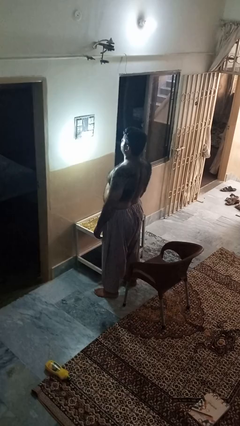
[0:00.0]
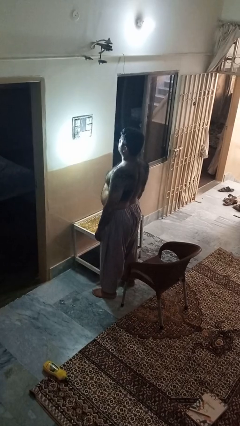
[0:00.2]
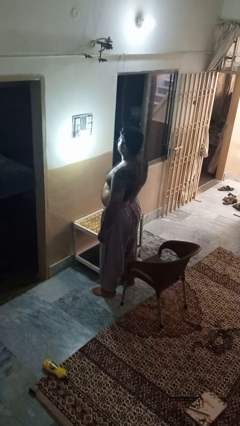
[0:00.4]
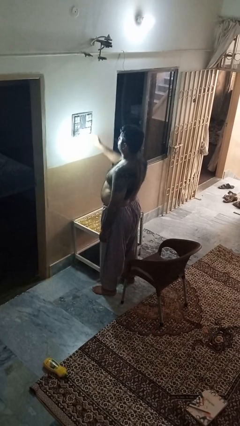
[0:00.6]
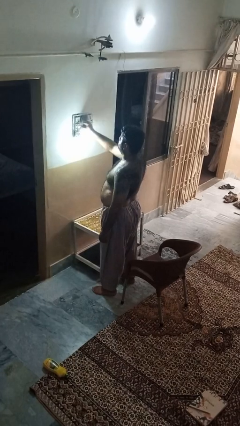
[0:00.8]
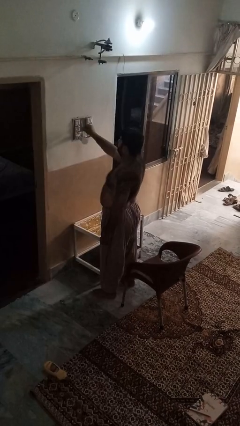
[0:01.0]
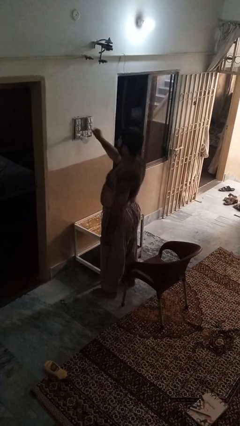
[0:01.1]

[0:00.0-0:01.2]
person turns off lamp

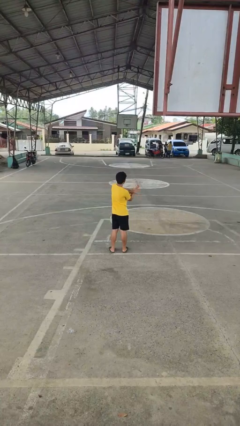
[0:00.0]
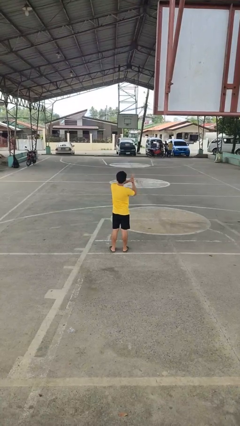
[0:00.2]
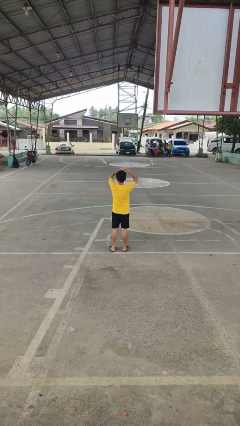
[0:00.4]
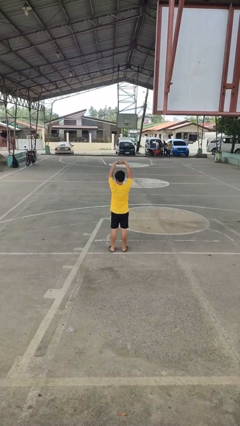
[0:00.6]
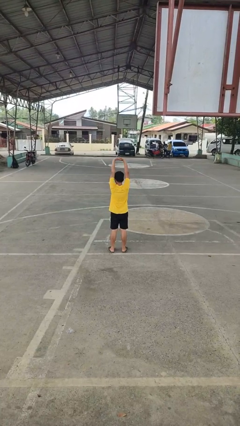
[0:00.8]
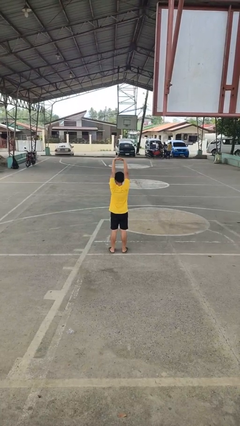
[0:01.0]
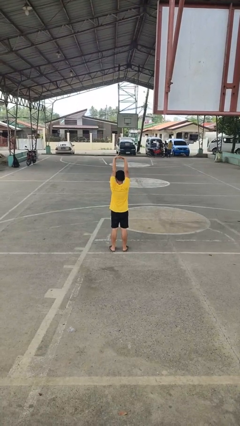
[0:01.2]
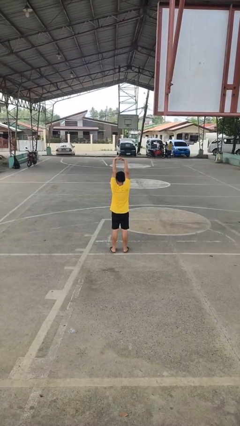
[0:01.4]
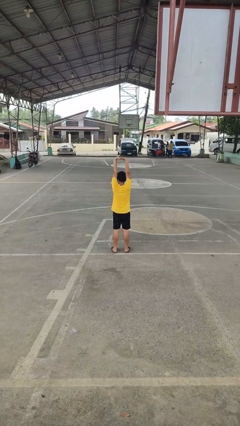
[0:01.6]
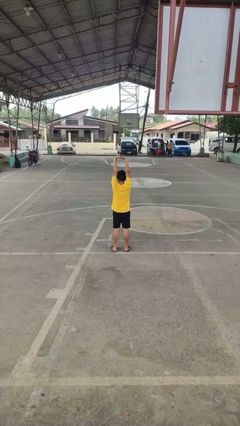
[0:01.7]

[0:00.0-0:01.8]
person stretches arms over head

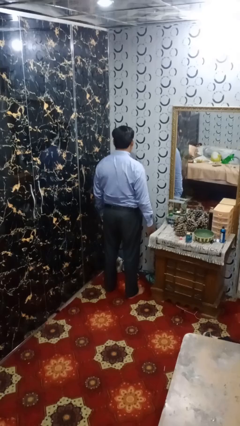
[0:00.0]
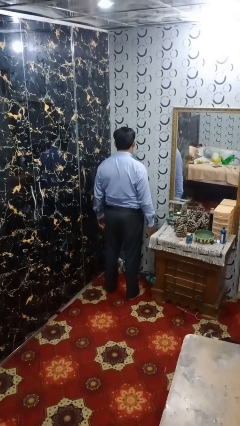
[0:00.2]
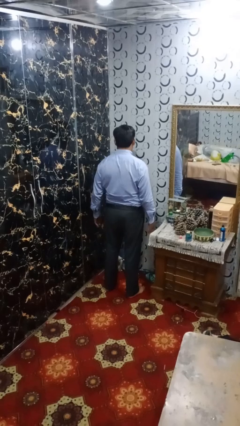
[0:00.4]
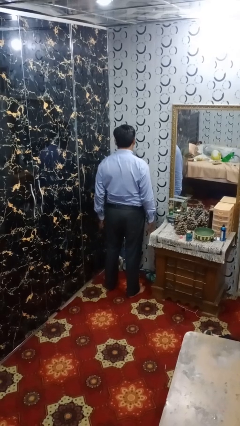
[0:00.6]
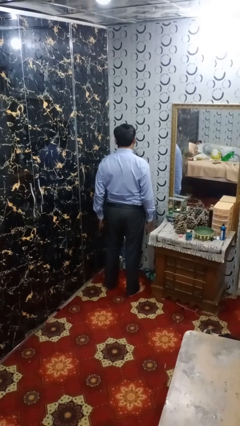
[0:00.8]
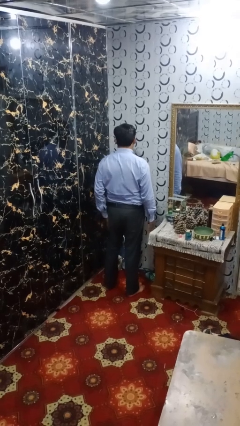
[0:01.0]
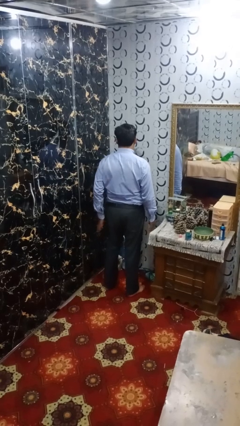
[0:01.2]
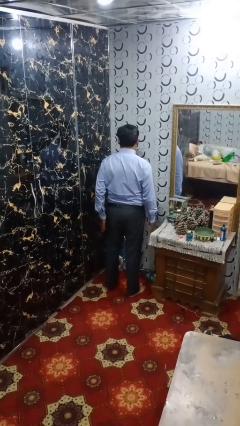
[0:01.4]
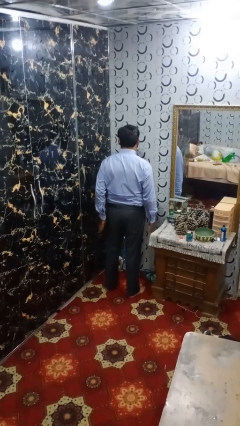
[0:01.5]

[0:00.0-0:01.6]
person slaps hands on thighs

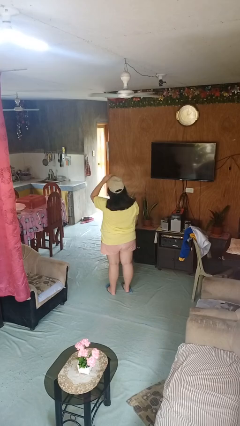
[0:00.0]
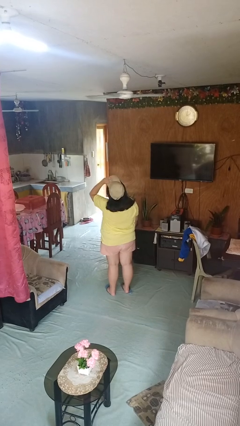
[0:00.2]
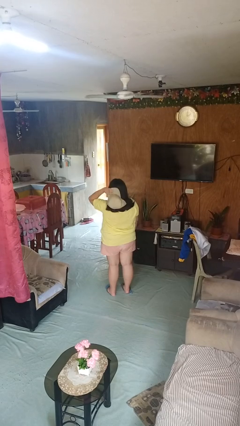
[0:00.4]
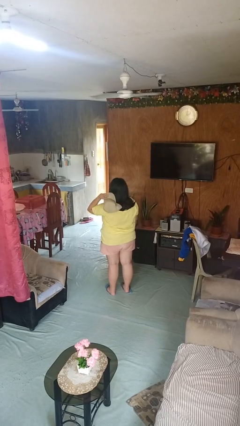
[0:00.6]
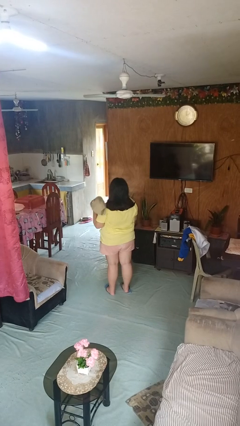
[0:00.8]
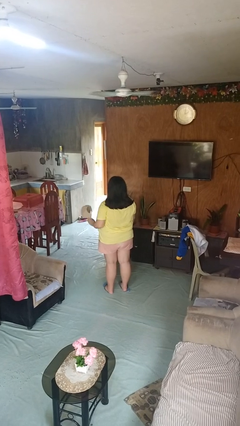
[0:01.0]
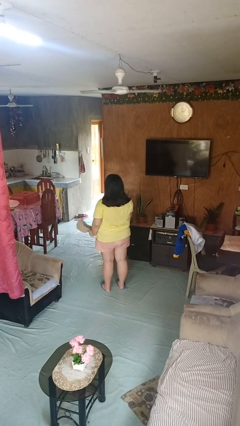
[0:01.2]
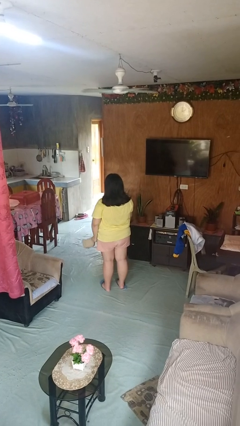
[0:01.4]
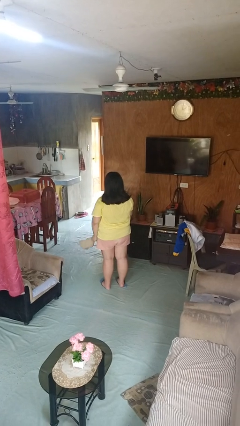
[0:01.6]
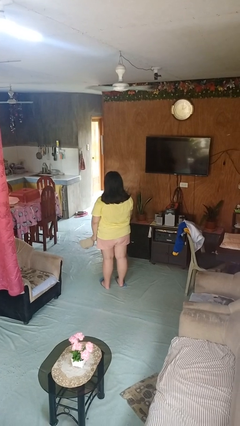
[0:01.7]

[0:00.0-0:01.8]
person takes off hat

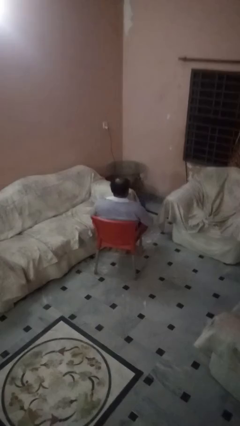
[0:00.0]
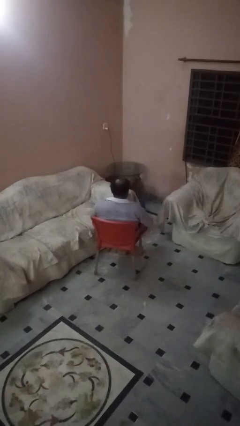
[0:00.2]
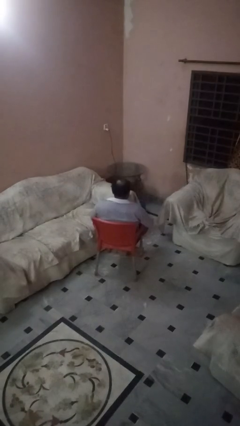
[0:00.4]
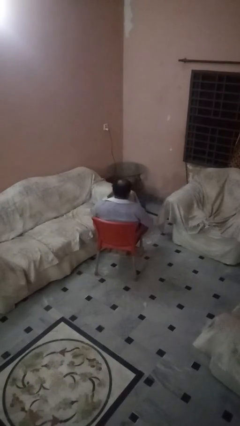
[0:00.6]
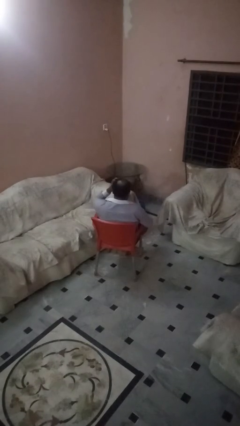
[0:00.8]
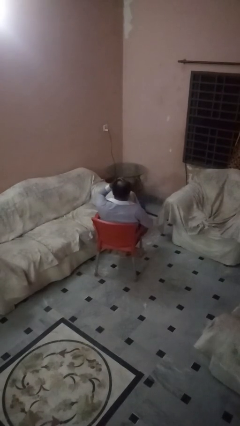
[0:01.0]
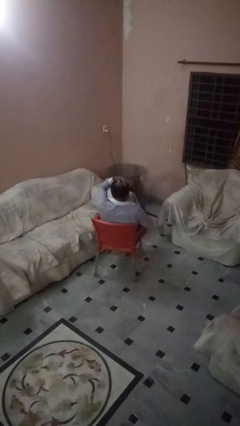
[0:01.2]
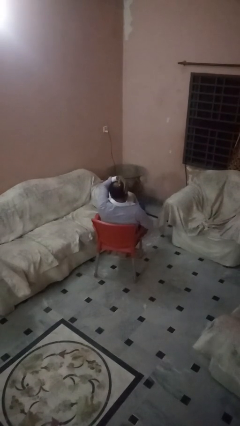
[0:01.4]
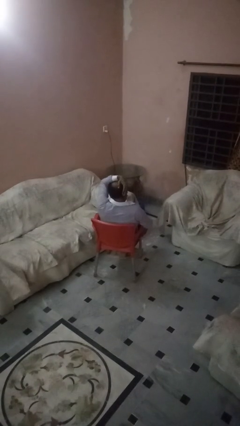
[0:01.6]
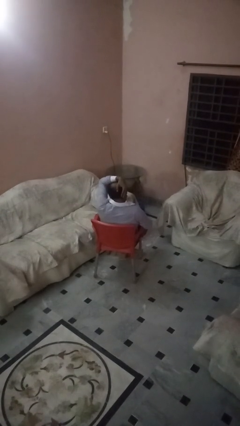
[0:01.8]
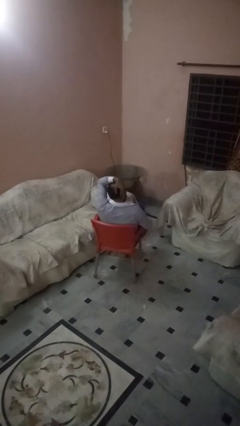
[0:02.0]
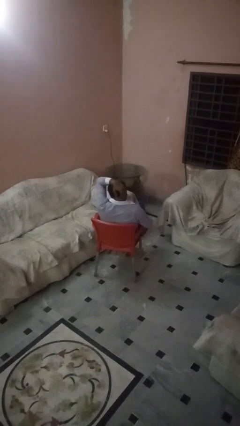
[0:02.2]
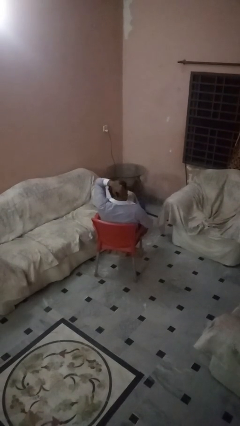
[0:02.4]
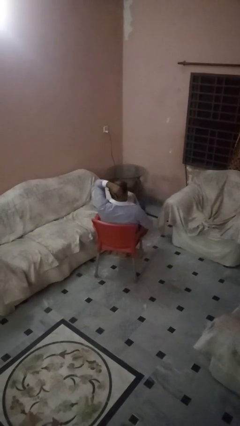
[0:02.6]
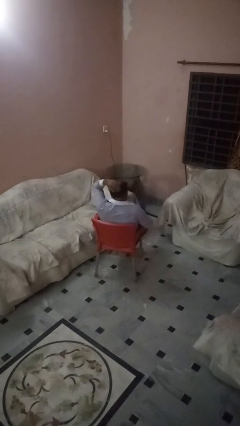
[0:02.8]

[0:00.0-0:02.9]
person strokes hair

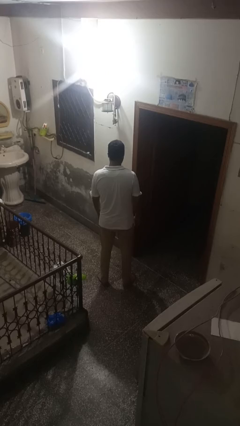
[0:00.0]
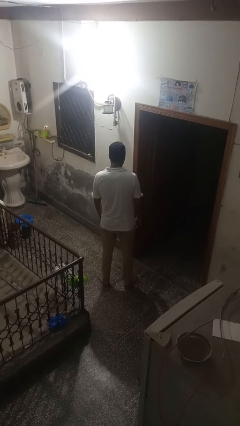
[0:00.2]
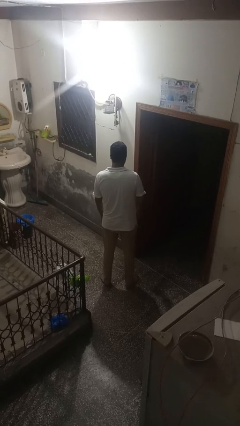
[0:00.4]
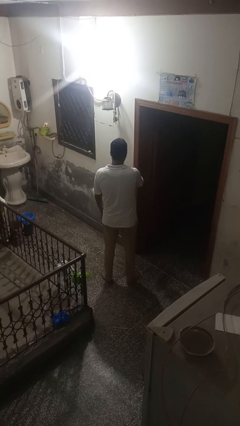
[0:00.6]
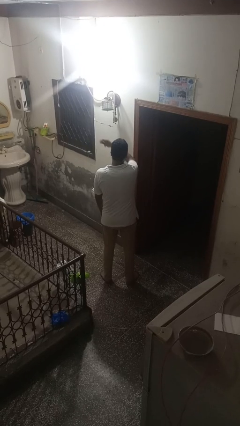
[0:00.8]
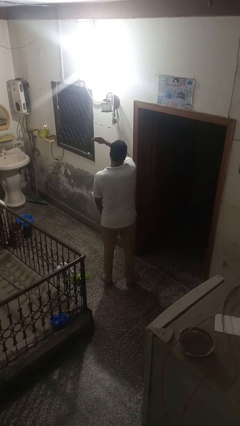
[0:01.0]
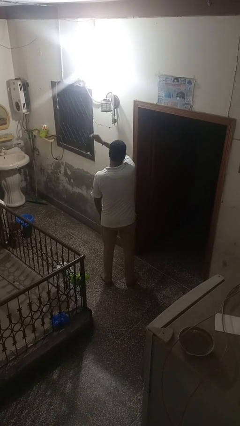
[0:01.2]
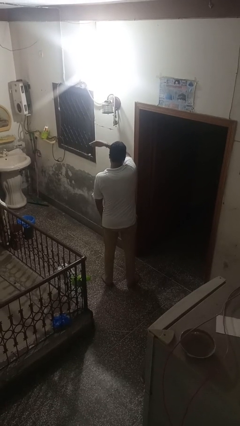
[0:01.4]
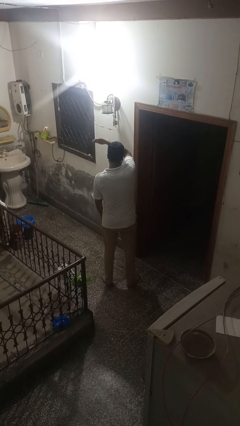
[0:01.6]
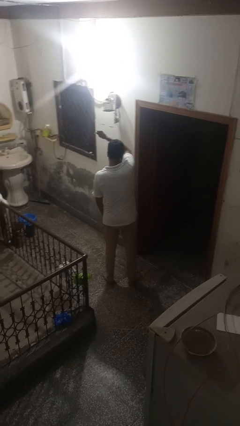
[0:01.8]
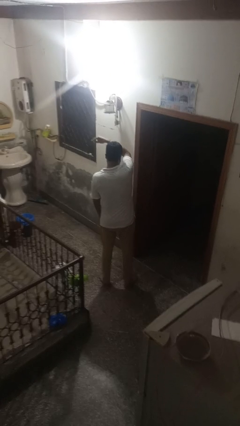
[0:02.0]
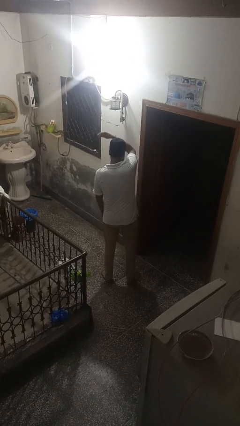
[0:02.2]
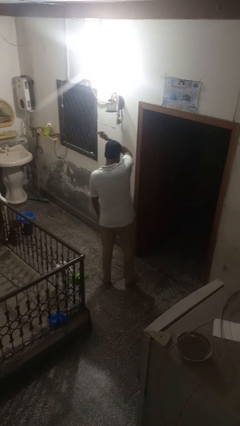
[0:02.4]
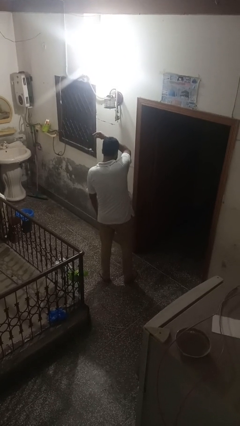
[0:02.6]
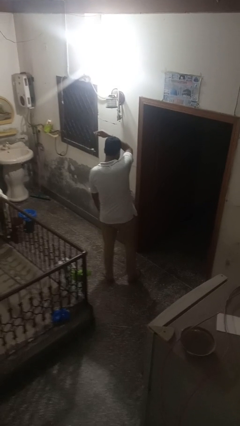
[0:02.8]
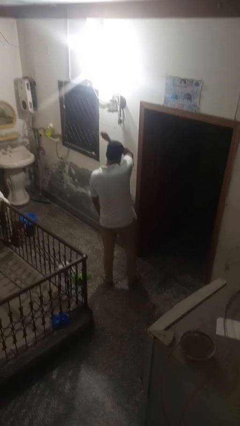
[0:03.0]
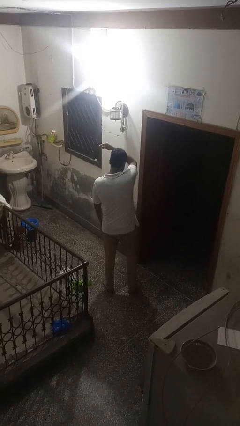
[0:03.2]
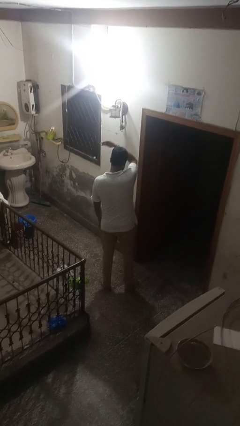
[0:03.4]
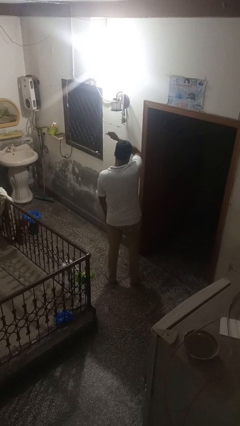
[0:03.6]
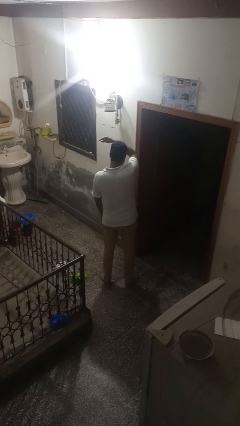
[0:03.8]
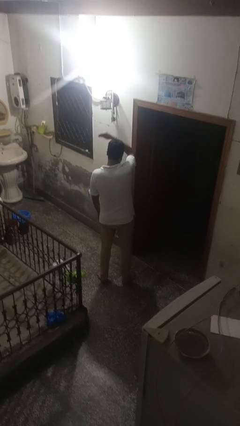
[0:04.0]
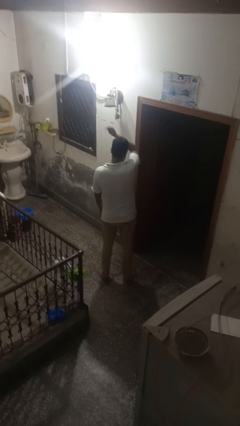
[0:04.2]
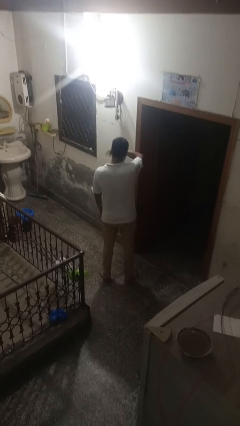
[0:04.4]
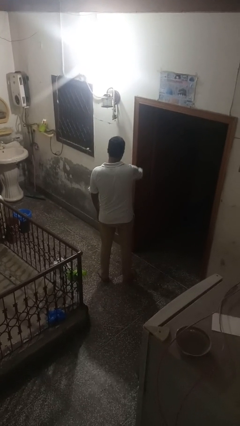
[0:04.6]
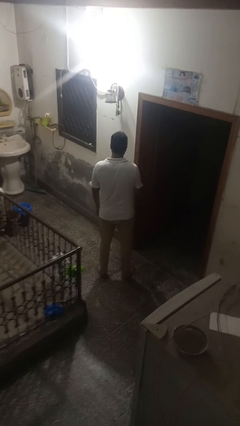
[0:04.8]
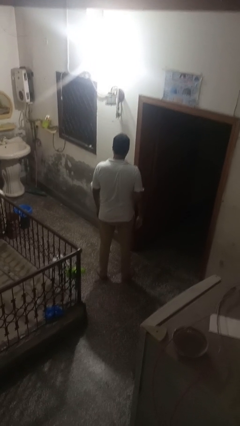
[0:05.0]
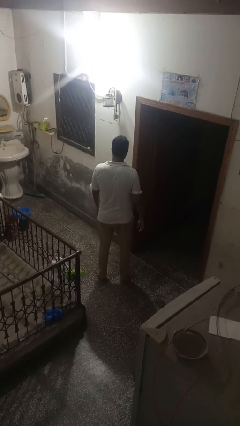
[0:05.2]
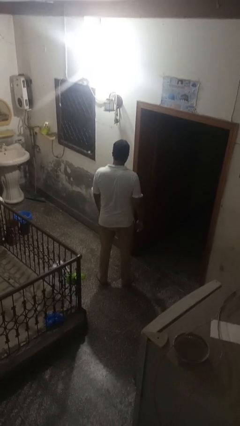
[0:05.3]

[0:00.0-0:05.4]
person snaps fingers

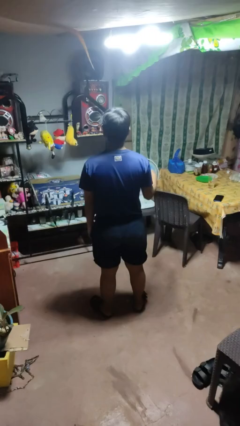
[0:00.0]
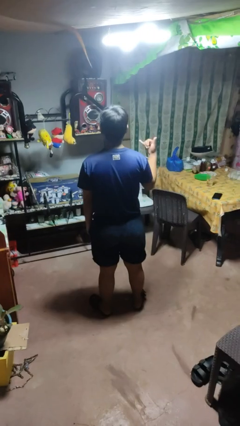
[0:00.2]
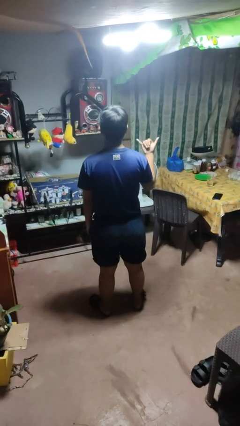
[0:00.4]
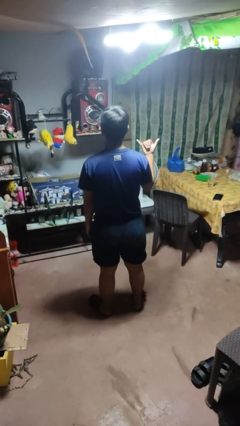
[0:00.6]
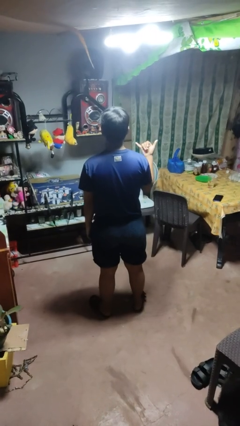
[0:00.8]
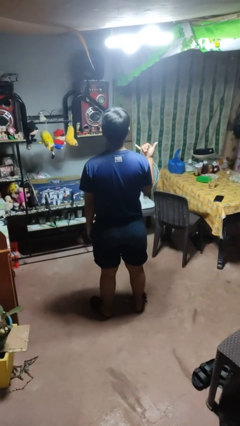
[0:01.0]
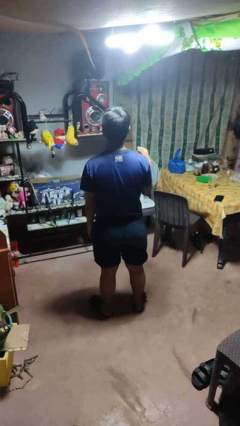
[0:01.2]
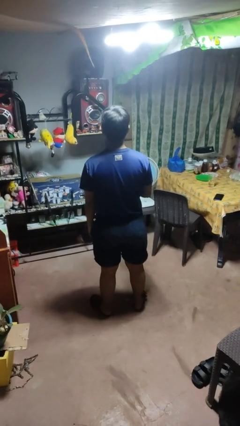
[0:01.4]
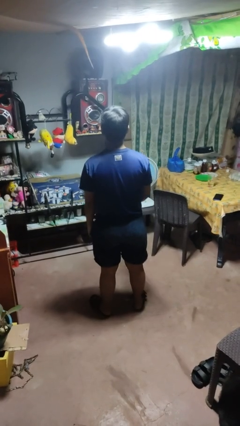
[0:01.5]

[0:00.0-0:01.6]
person gestures hang loose

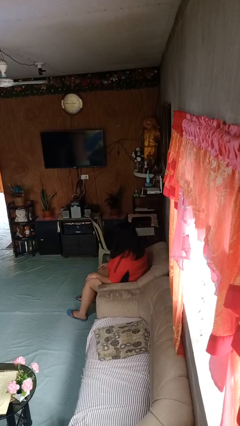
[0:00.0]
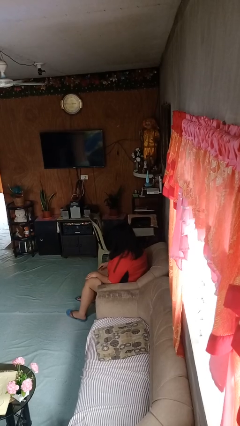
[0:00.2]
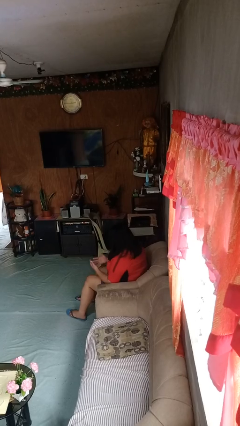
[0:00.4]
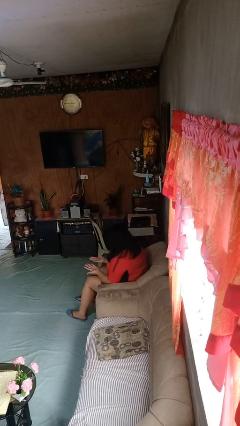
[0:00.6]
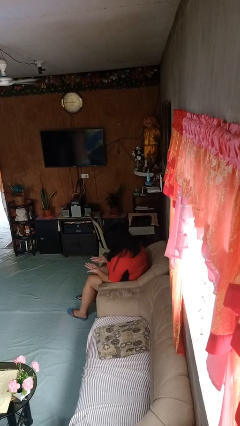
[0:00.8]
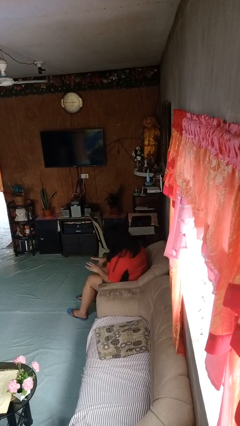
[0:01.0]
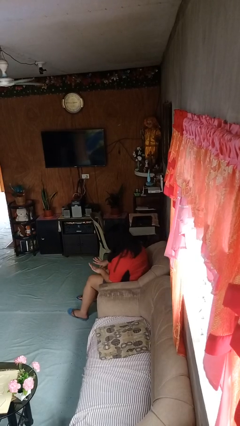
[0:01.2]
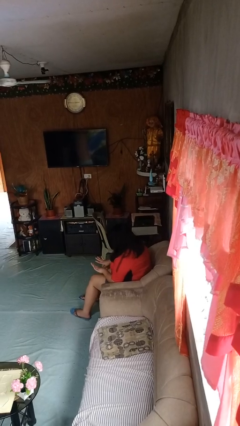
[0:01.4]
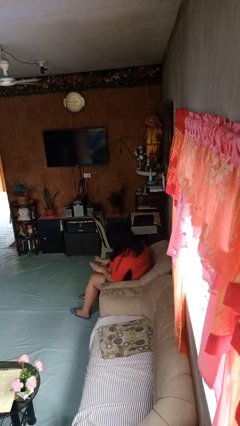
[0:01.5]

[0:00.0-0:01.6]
person looks at hands in lap
